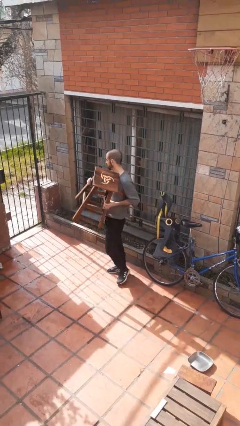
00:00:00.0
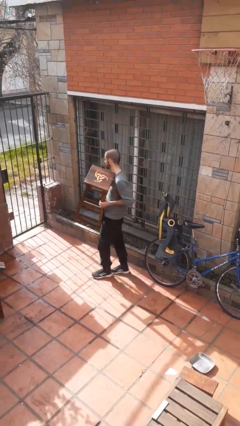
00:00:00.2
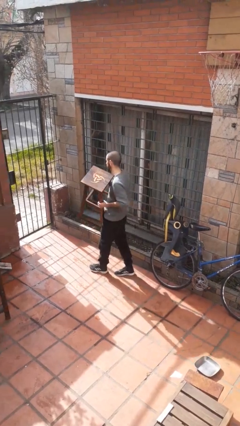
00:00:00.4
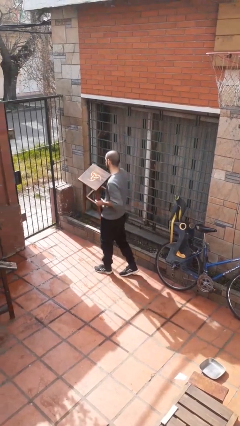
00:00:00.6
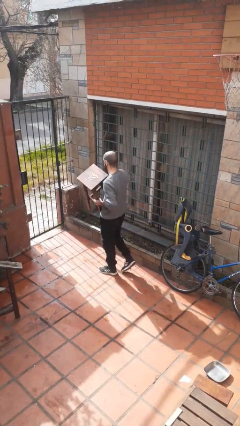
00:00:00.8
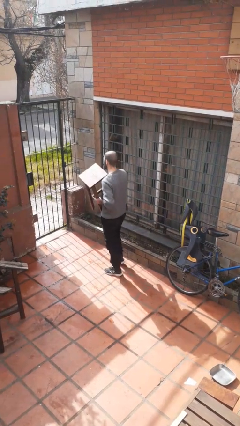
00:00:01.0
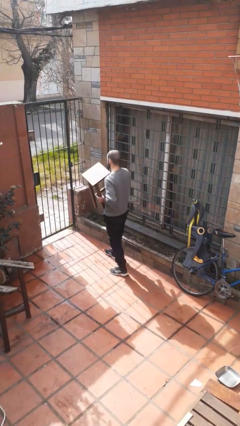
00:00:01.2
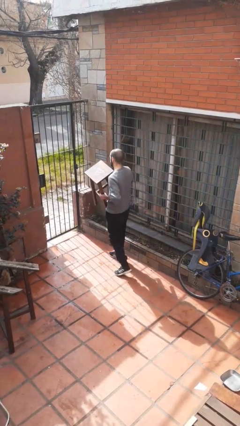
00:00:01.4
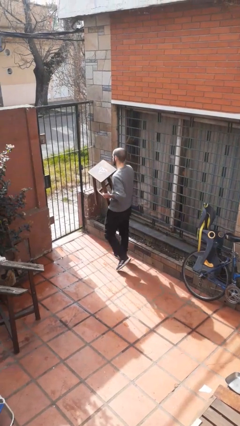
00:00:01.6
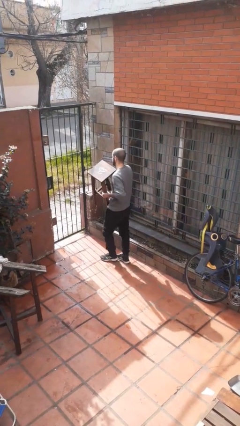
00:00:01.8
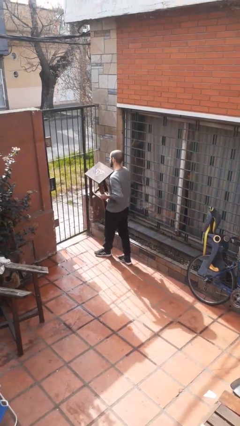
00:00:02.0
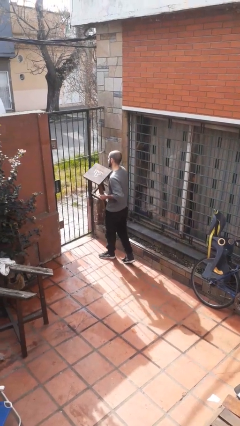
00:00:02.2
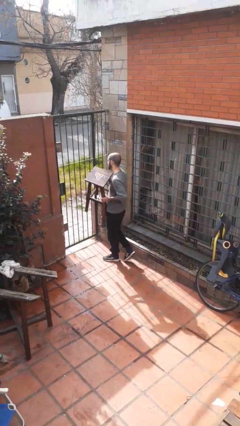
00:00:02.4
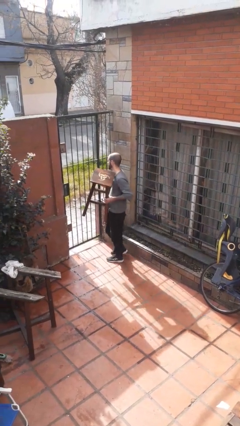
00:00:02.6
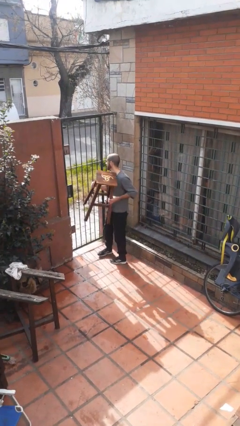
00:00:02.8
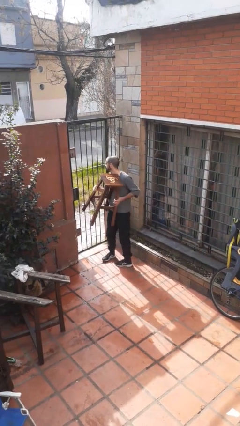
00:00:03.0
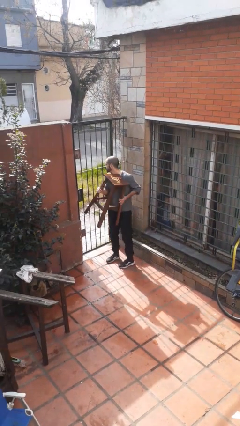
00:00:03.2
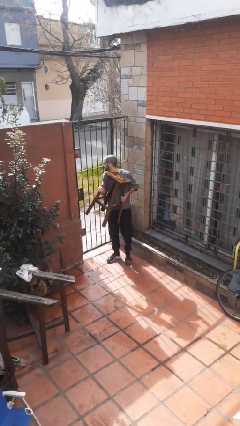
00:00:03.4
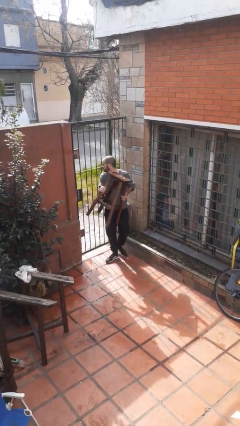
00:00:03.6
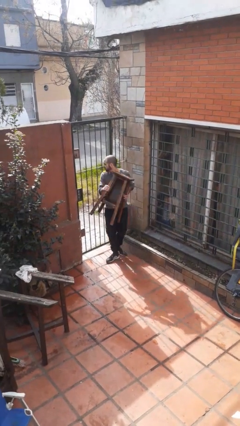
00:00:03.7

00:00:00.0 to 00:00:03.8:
person carries furniture

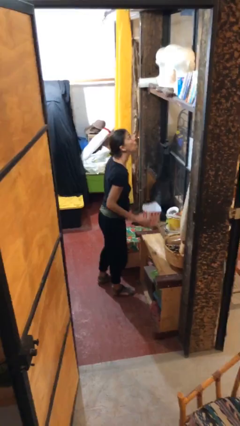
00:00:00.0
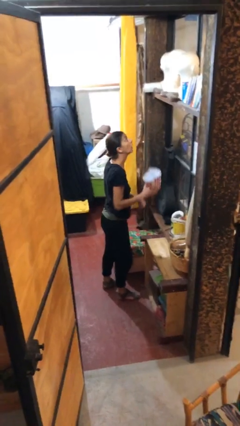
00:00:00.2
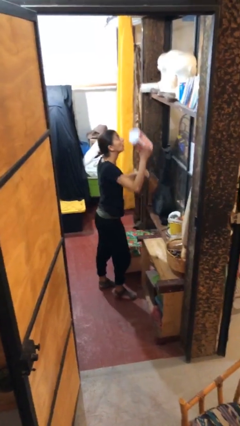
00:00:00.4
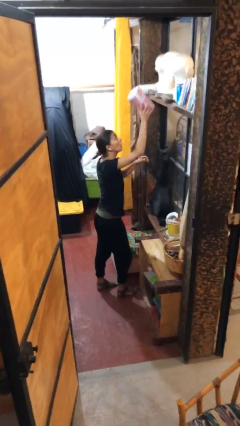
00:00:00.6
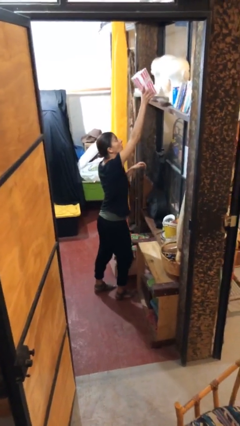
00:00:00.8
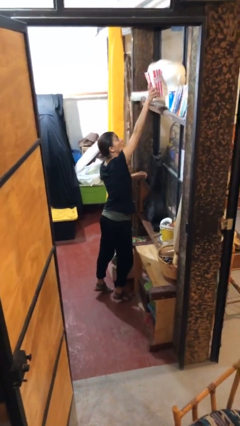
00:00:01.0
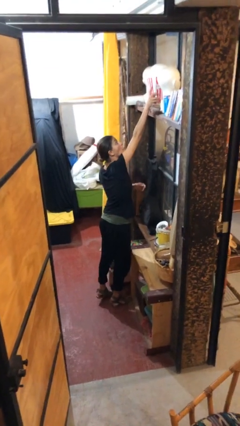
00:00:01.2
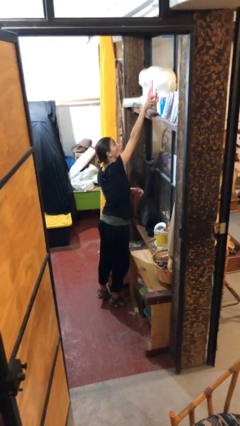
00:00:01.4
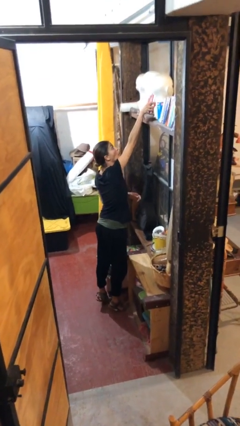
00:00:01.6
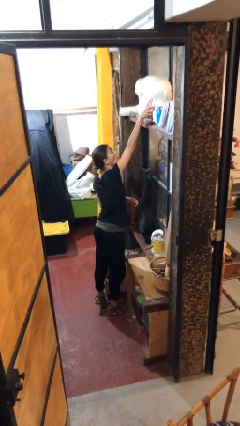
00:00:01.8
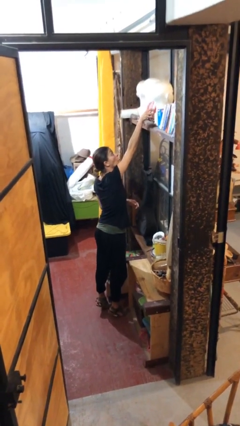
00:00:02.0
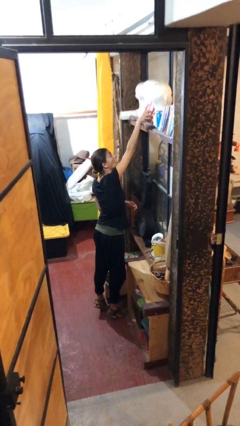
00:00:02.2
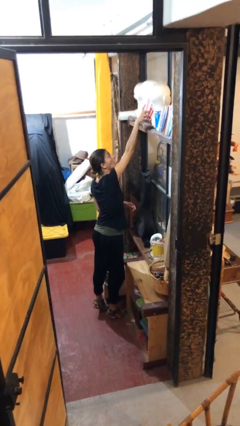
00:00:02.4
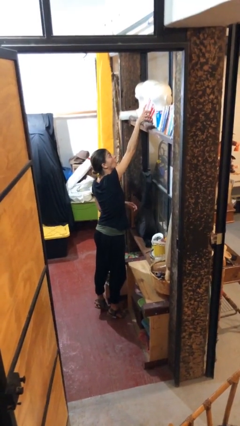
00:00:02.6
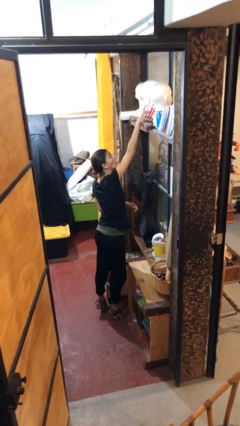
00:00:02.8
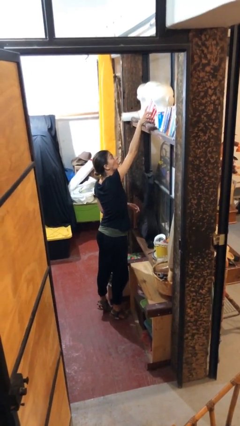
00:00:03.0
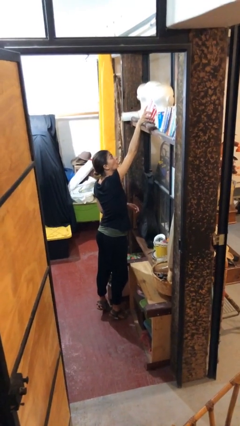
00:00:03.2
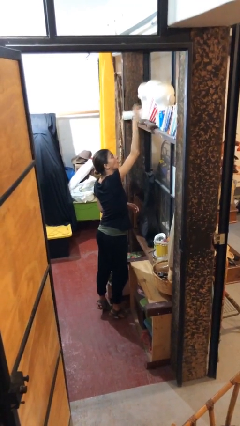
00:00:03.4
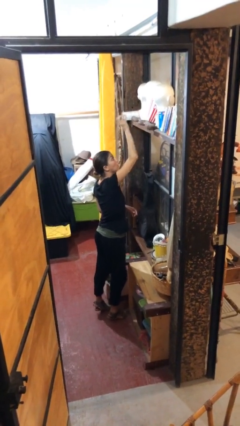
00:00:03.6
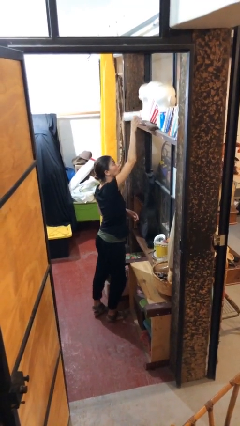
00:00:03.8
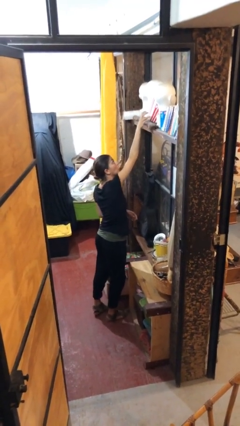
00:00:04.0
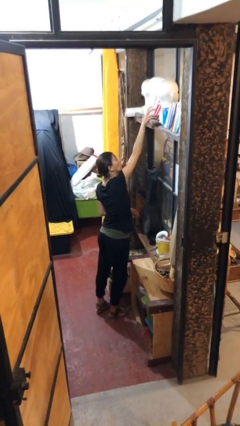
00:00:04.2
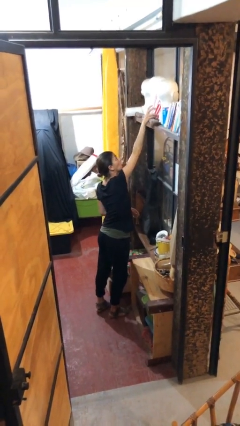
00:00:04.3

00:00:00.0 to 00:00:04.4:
person puts down object on shelf

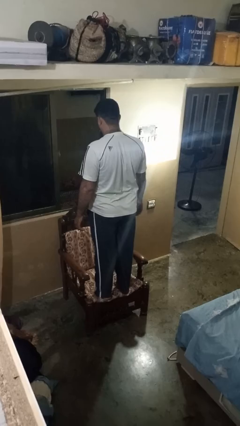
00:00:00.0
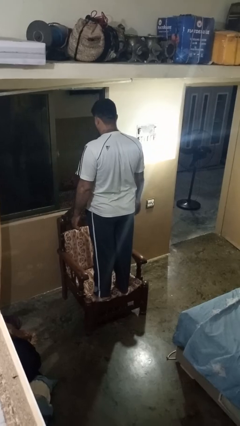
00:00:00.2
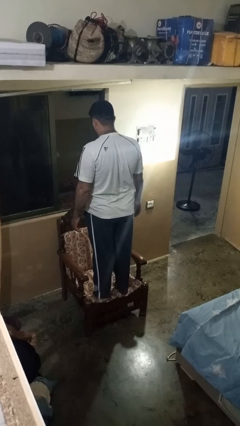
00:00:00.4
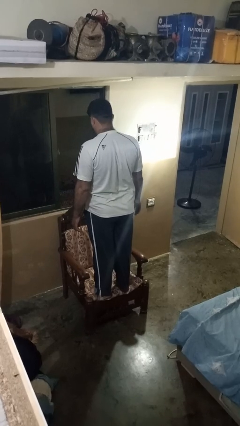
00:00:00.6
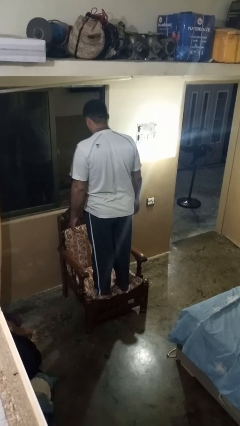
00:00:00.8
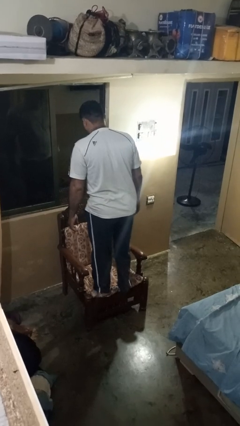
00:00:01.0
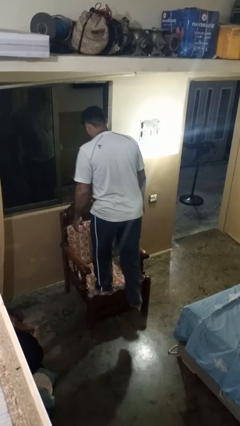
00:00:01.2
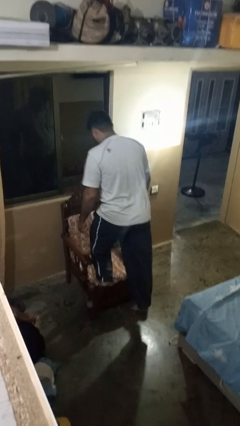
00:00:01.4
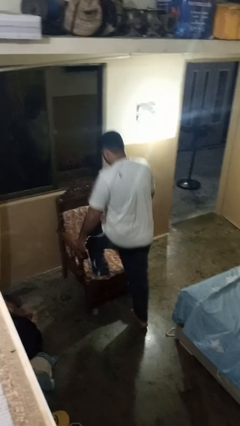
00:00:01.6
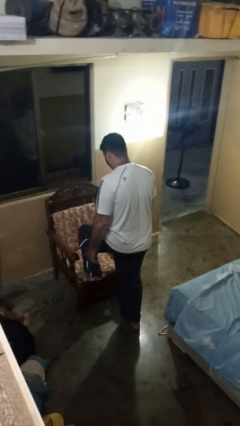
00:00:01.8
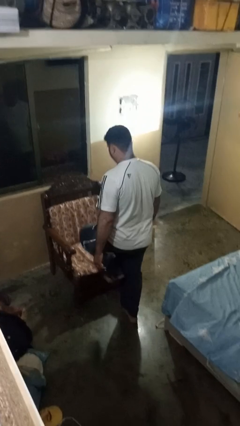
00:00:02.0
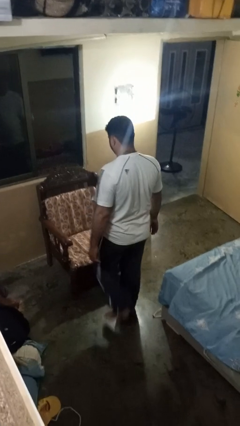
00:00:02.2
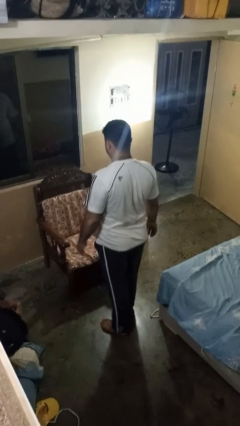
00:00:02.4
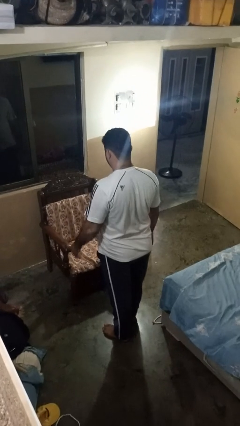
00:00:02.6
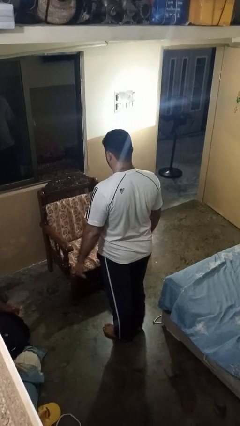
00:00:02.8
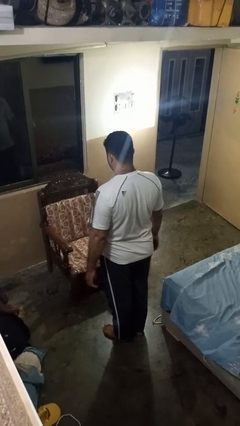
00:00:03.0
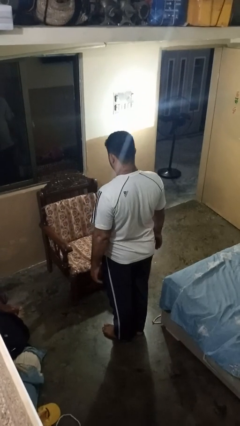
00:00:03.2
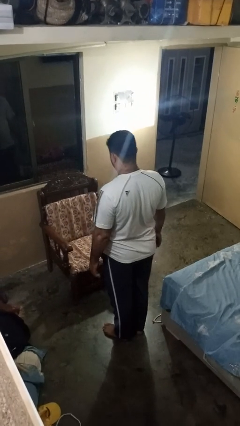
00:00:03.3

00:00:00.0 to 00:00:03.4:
person climbs off chair

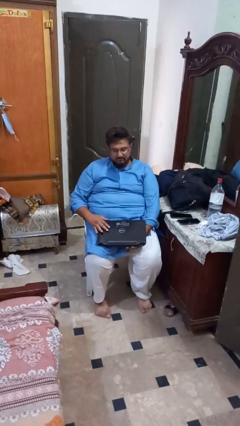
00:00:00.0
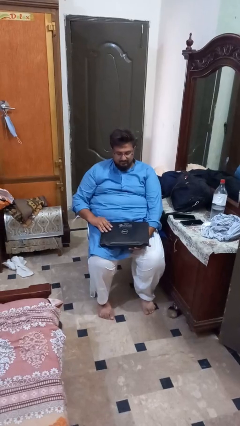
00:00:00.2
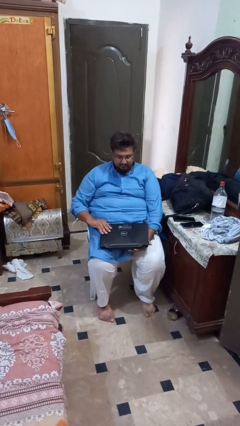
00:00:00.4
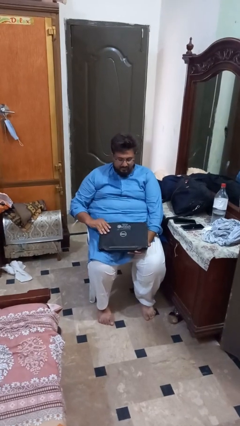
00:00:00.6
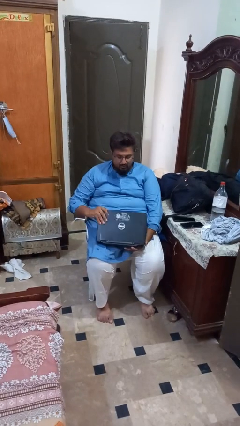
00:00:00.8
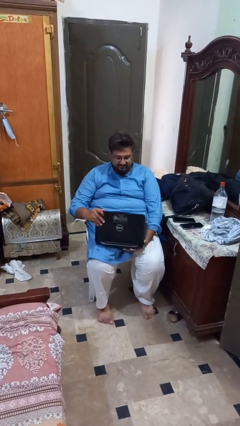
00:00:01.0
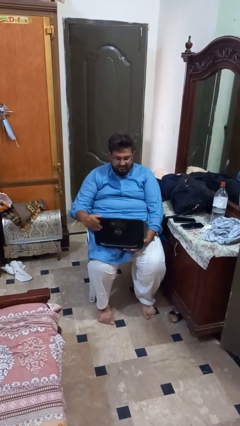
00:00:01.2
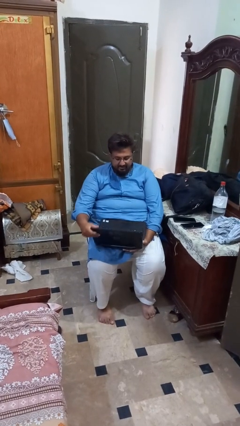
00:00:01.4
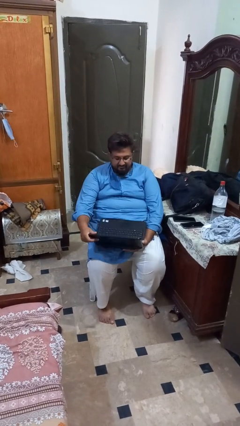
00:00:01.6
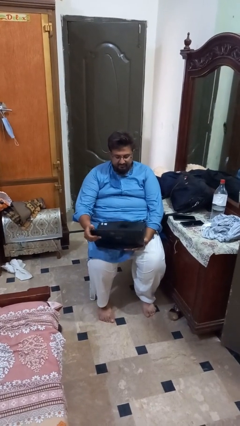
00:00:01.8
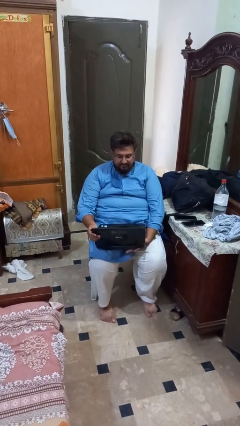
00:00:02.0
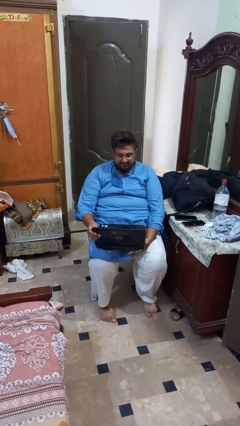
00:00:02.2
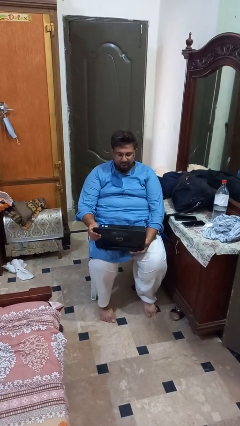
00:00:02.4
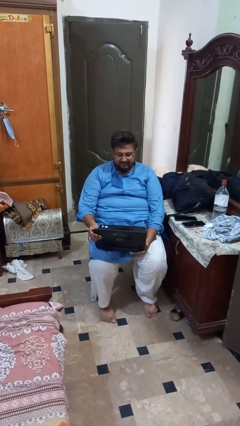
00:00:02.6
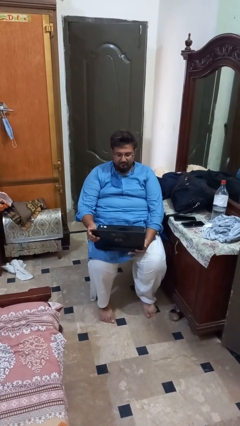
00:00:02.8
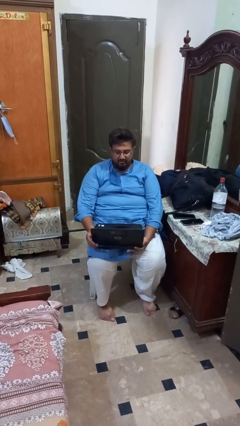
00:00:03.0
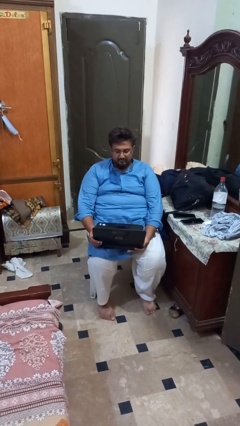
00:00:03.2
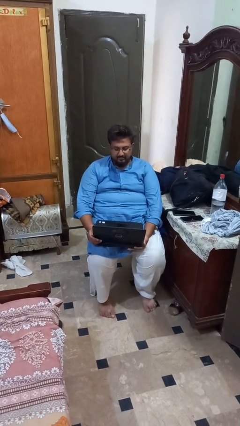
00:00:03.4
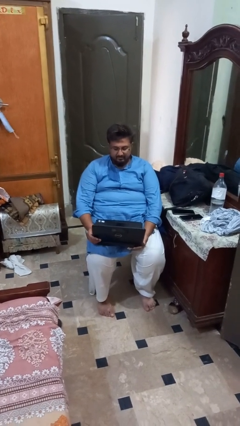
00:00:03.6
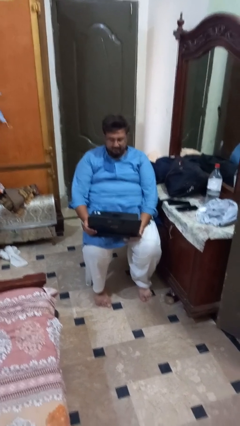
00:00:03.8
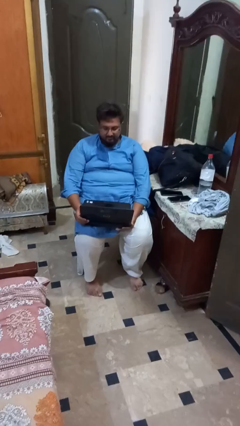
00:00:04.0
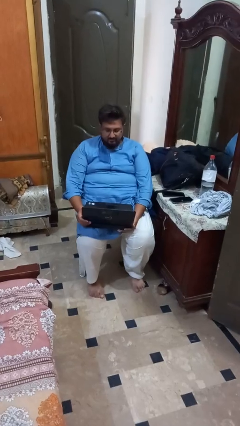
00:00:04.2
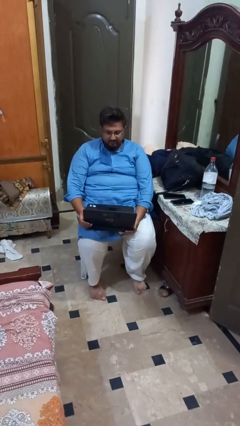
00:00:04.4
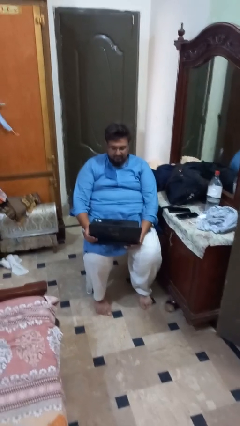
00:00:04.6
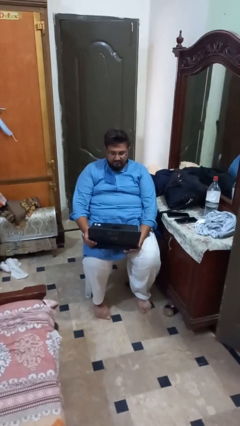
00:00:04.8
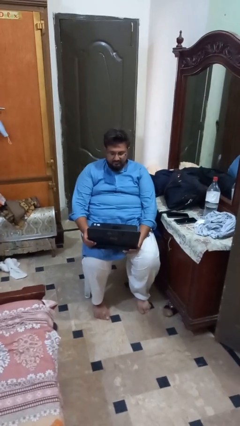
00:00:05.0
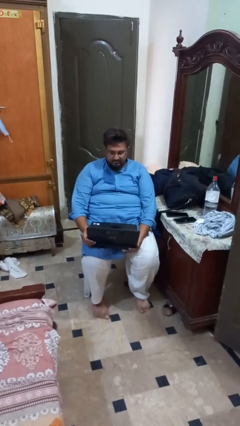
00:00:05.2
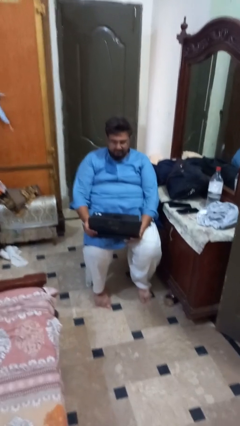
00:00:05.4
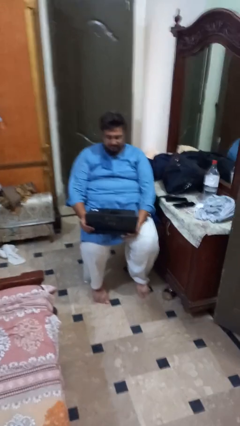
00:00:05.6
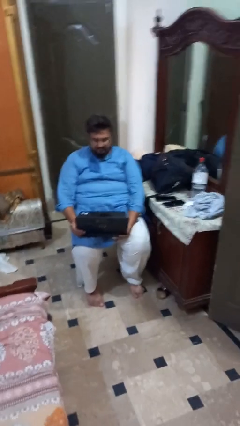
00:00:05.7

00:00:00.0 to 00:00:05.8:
person opens laptop

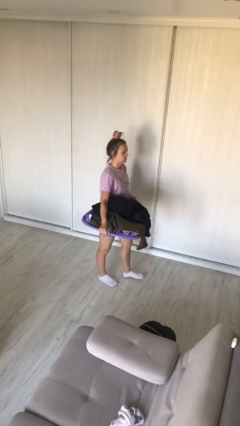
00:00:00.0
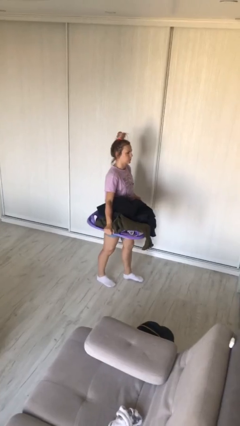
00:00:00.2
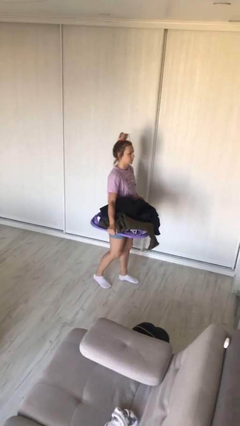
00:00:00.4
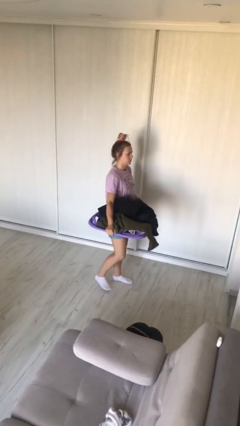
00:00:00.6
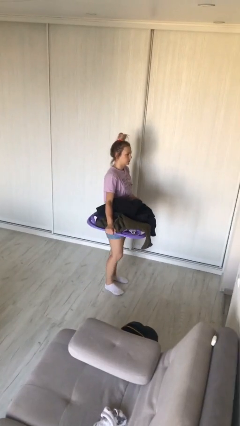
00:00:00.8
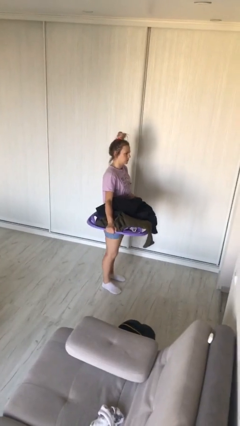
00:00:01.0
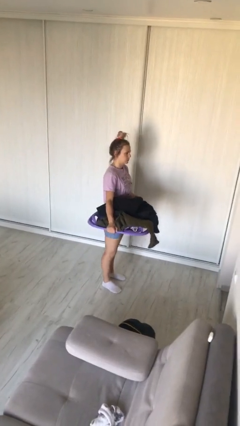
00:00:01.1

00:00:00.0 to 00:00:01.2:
person carries laundry basket
